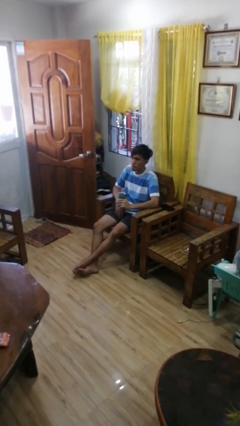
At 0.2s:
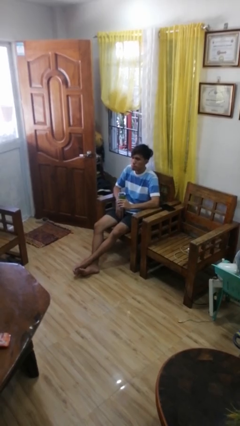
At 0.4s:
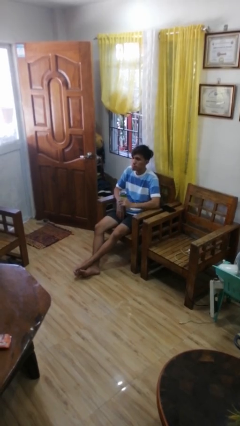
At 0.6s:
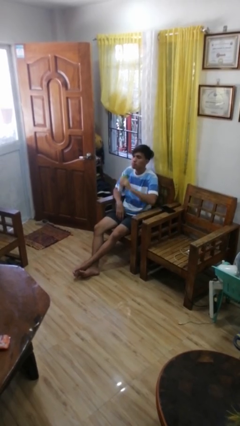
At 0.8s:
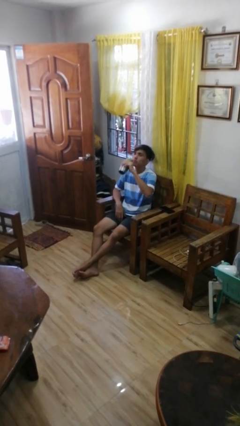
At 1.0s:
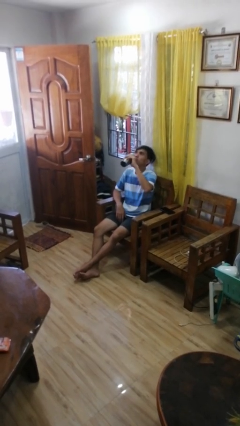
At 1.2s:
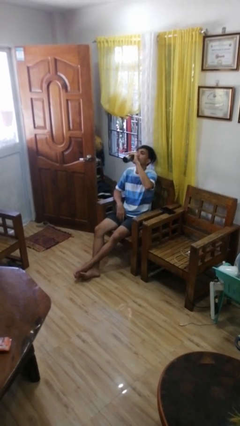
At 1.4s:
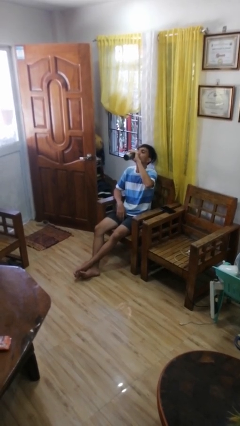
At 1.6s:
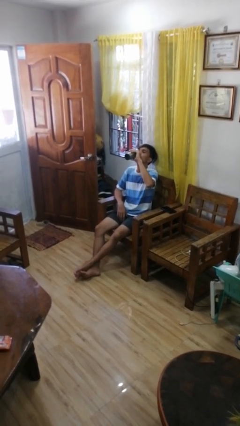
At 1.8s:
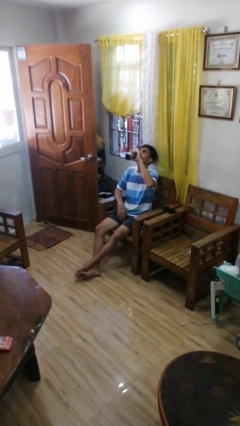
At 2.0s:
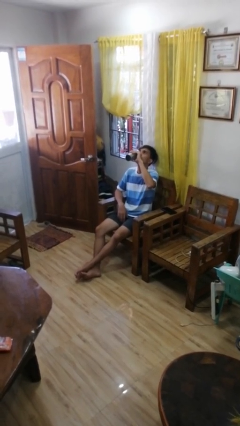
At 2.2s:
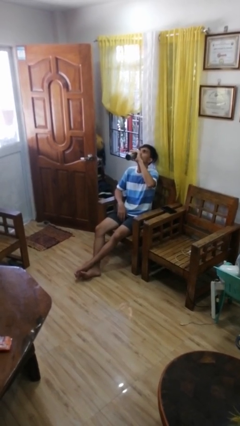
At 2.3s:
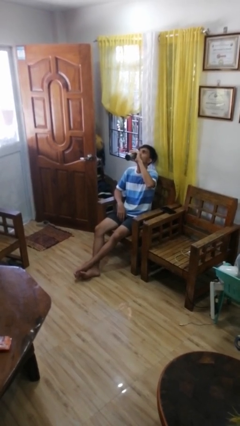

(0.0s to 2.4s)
person drinks from bottle

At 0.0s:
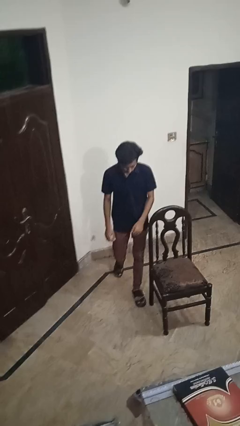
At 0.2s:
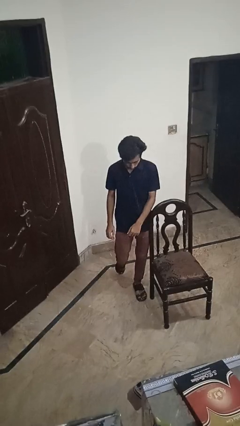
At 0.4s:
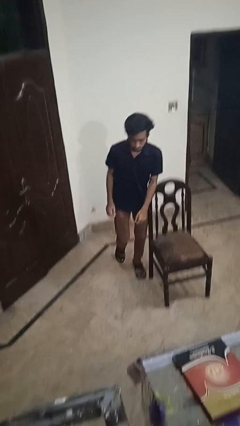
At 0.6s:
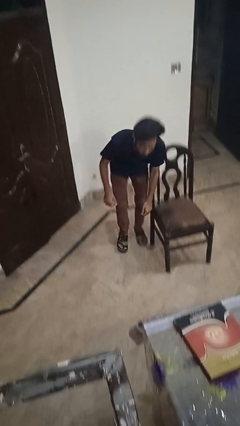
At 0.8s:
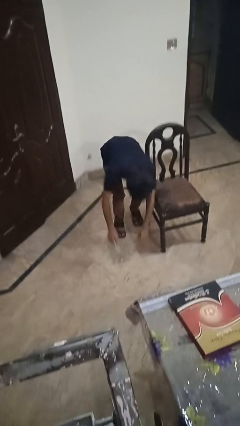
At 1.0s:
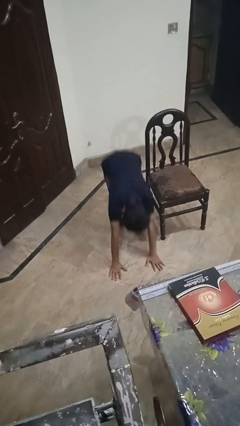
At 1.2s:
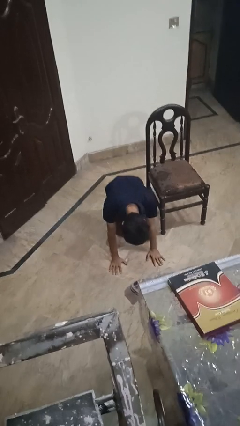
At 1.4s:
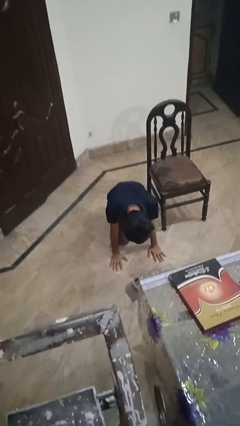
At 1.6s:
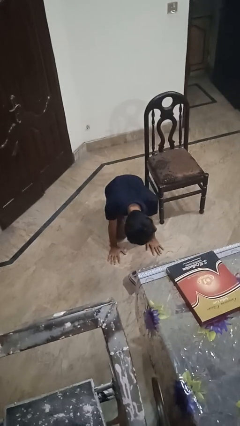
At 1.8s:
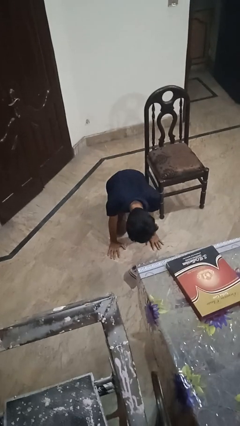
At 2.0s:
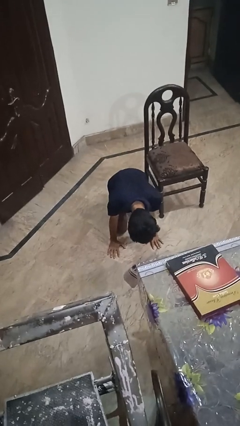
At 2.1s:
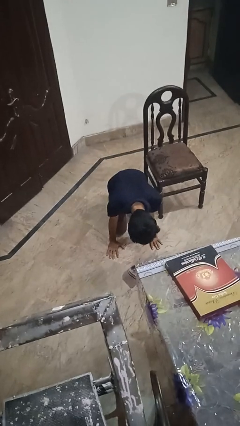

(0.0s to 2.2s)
person trips on object on floor

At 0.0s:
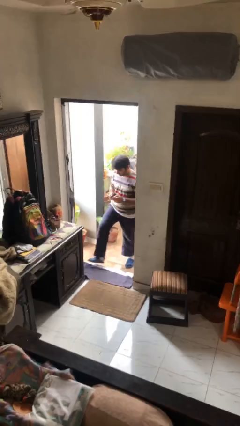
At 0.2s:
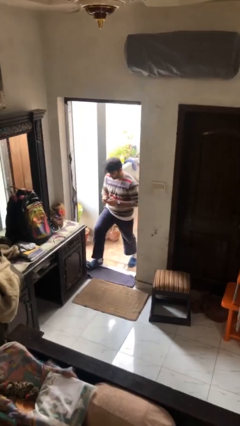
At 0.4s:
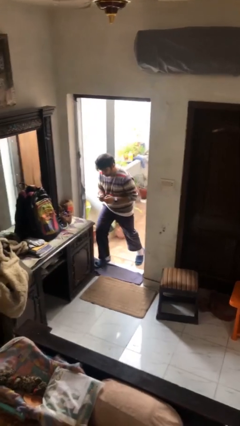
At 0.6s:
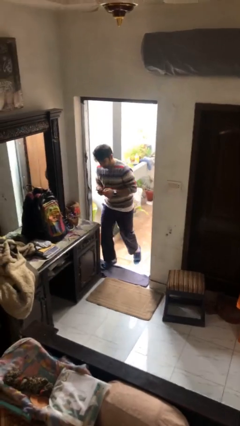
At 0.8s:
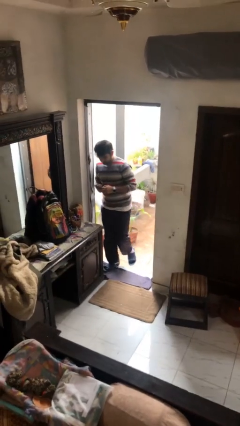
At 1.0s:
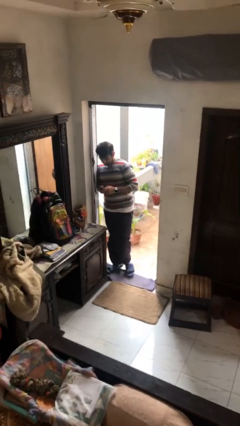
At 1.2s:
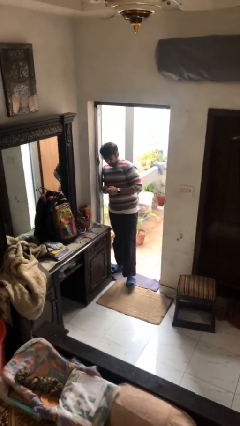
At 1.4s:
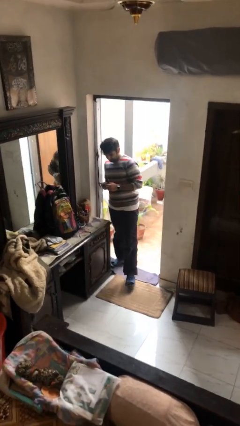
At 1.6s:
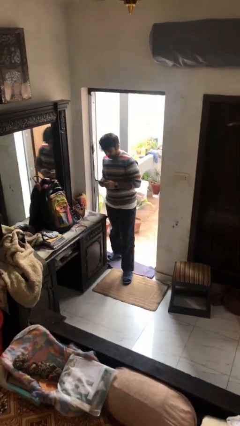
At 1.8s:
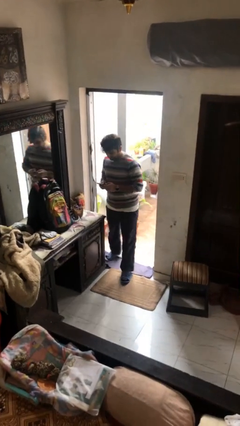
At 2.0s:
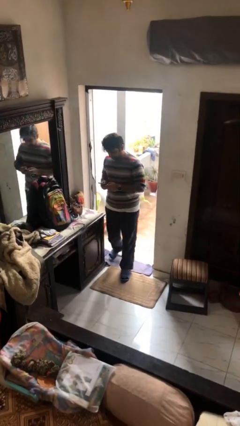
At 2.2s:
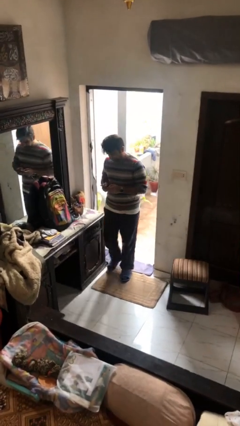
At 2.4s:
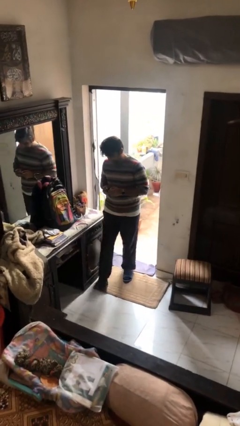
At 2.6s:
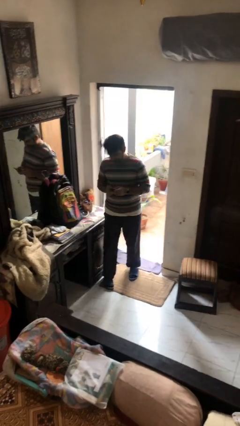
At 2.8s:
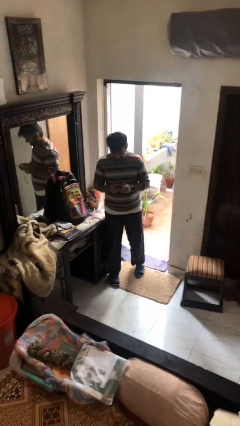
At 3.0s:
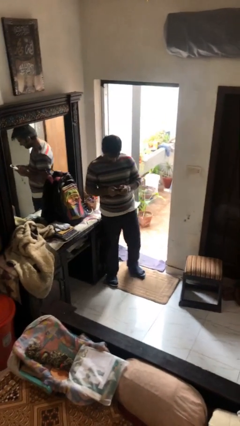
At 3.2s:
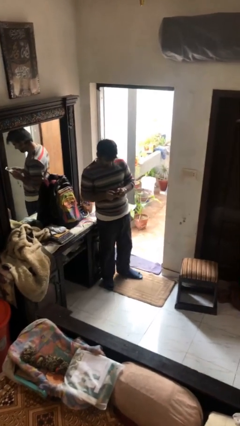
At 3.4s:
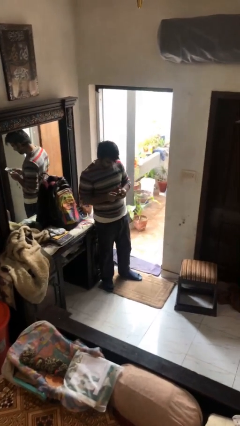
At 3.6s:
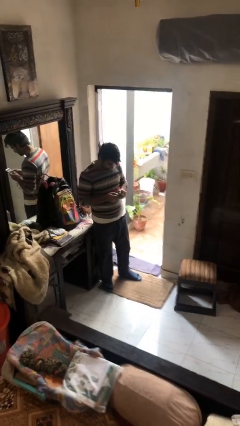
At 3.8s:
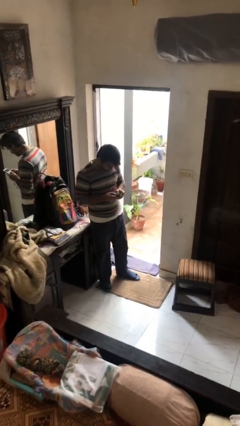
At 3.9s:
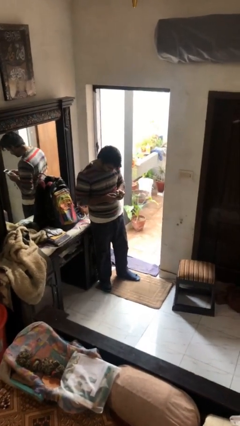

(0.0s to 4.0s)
person enters scene through structure

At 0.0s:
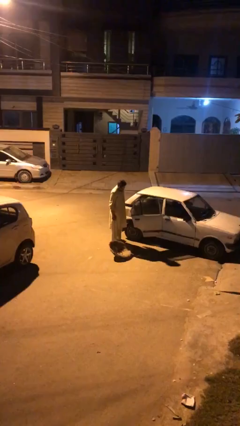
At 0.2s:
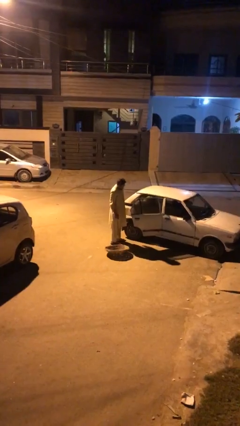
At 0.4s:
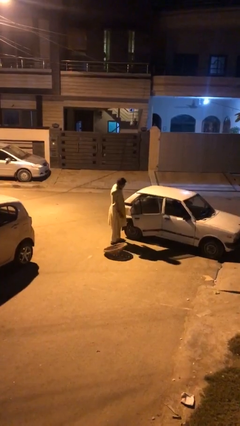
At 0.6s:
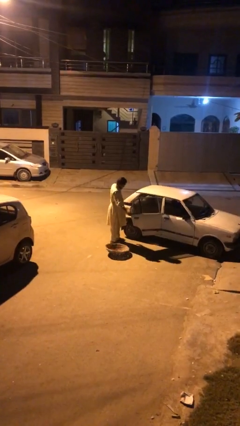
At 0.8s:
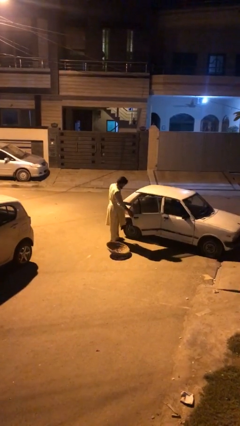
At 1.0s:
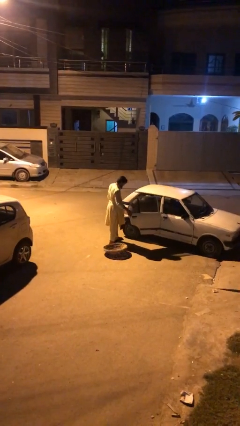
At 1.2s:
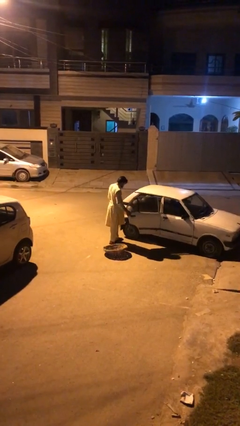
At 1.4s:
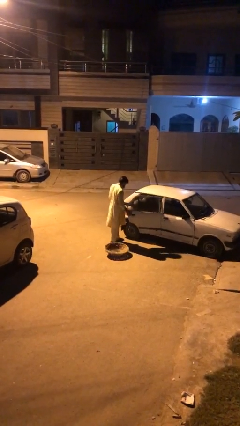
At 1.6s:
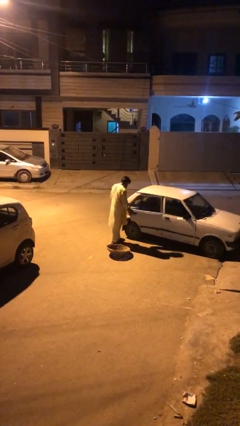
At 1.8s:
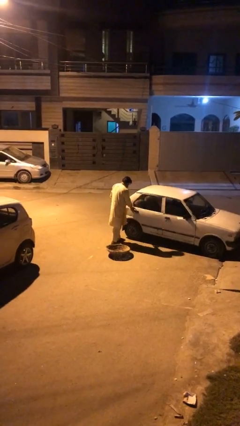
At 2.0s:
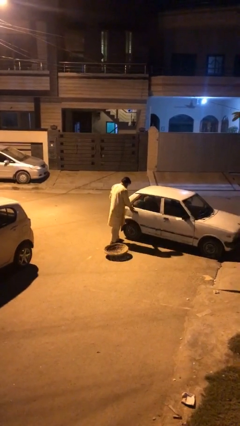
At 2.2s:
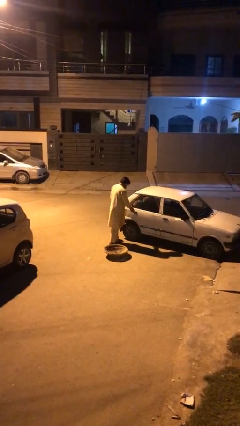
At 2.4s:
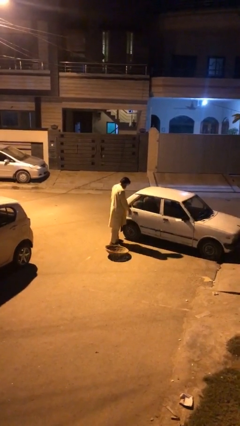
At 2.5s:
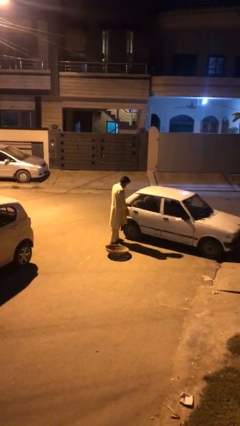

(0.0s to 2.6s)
person closes car door

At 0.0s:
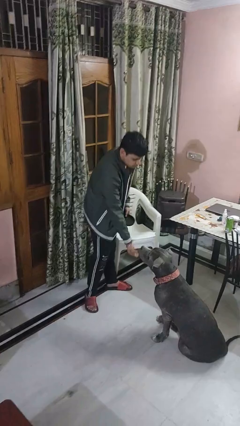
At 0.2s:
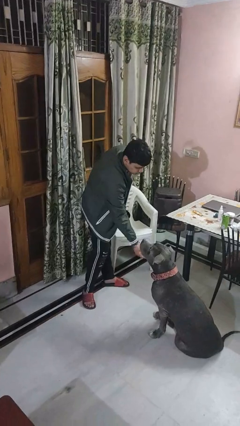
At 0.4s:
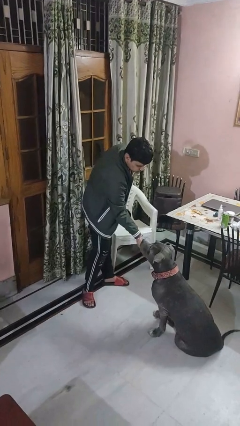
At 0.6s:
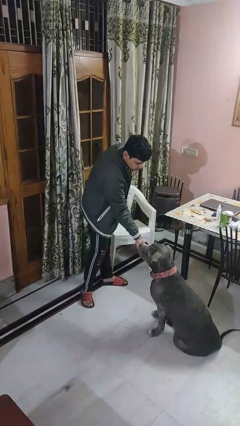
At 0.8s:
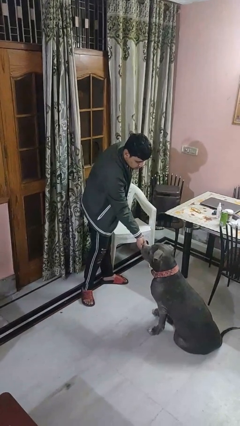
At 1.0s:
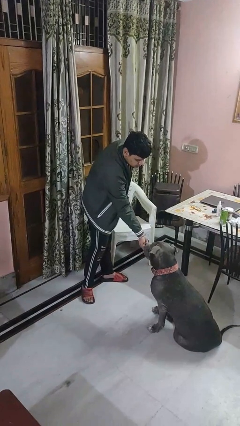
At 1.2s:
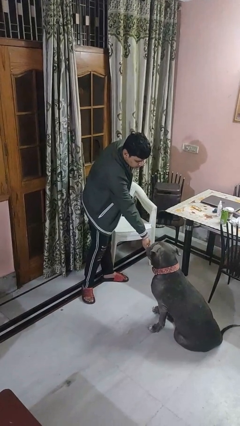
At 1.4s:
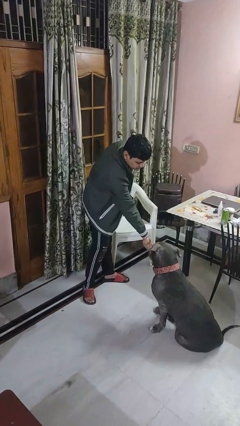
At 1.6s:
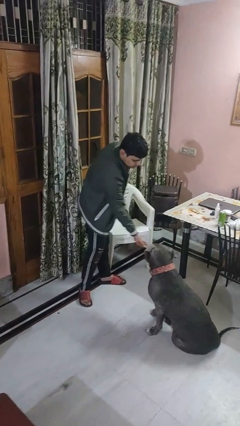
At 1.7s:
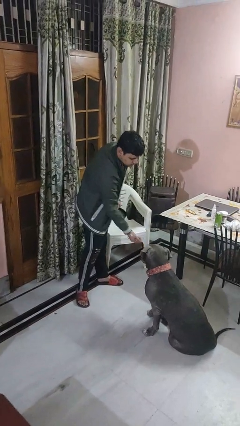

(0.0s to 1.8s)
person feeds dog

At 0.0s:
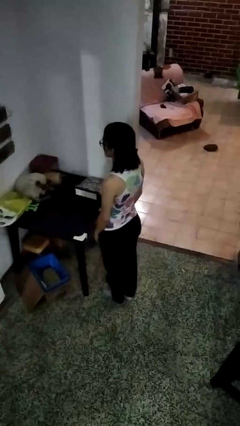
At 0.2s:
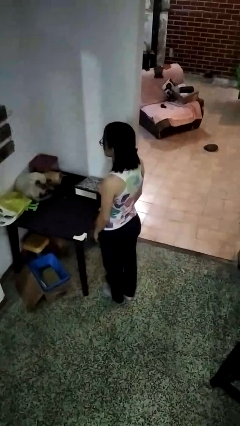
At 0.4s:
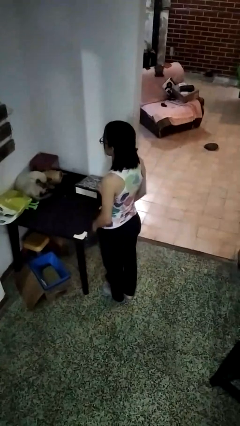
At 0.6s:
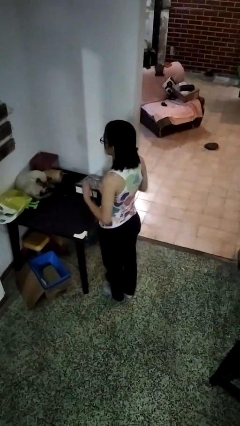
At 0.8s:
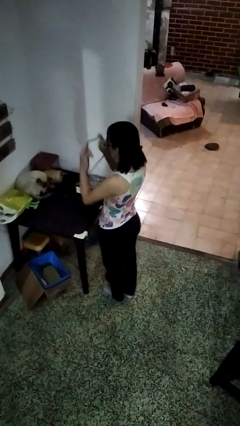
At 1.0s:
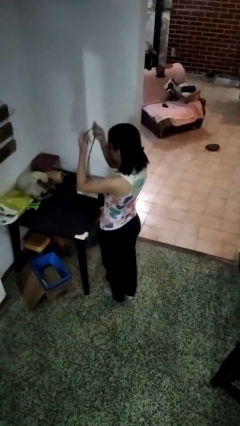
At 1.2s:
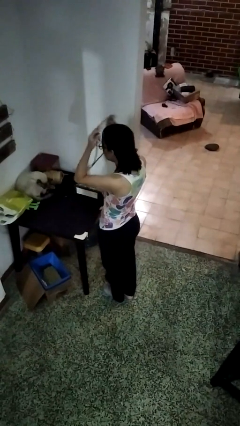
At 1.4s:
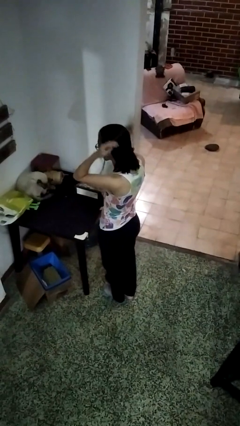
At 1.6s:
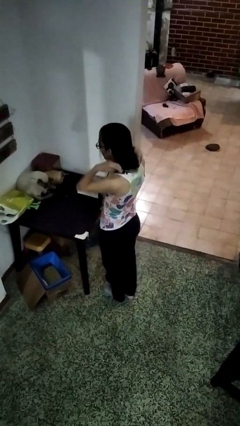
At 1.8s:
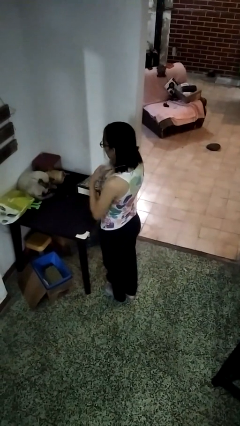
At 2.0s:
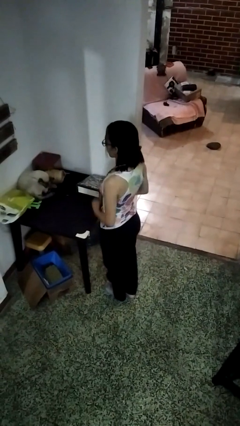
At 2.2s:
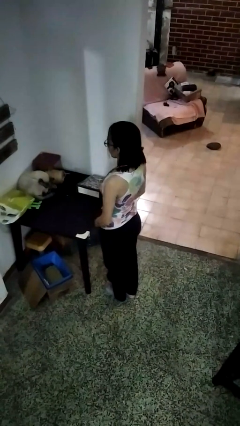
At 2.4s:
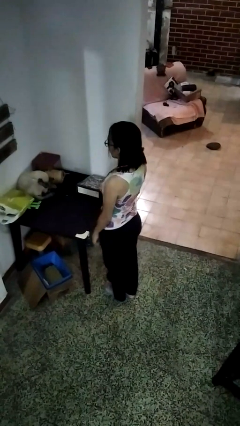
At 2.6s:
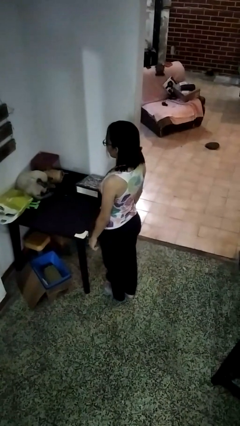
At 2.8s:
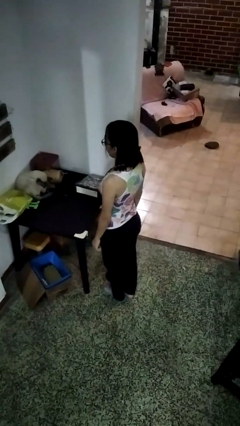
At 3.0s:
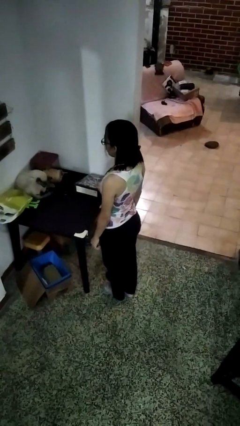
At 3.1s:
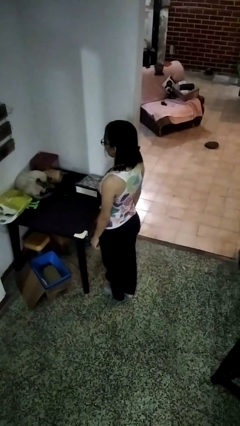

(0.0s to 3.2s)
person puts on necklace

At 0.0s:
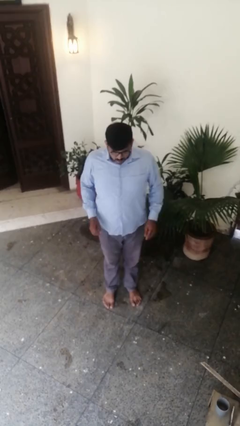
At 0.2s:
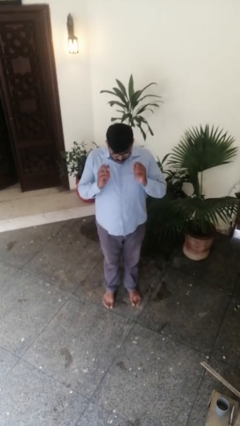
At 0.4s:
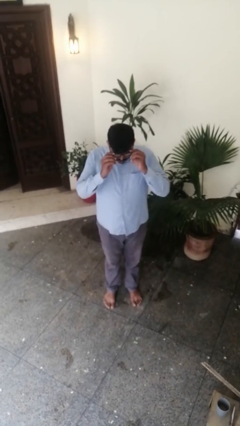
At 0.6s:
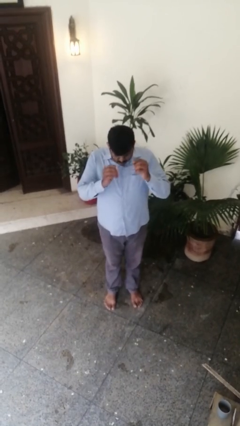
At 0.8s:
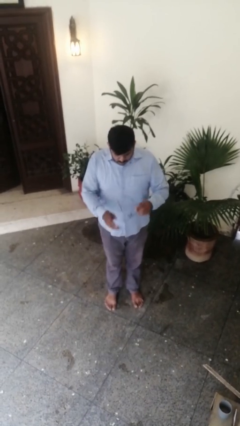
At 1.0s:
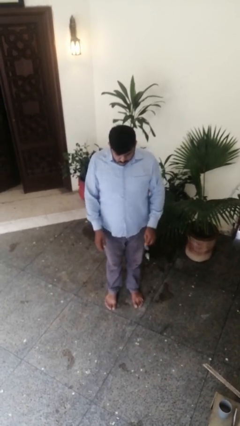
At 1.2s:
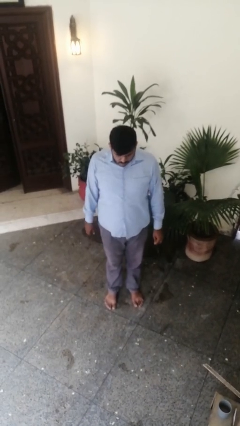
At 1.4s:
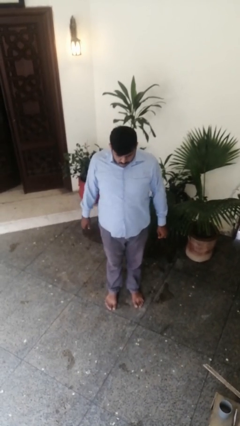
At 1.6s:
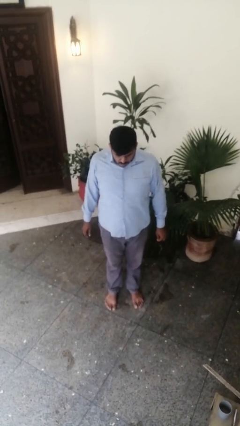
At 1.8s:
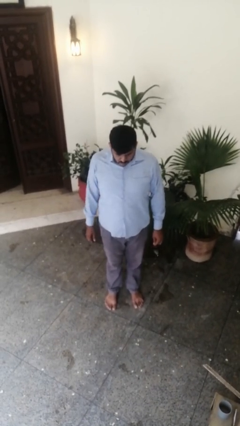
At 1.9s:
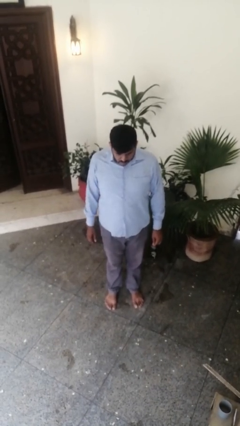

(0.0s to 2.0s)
person takes off glasses
